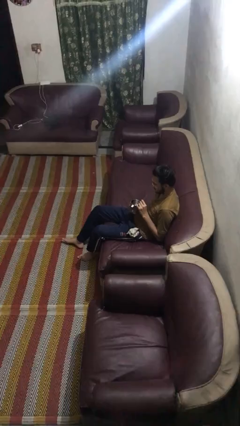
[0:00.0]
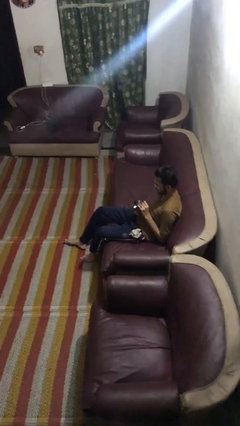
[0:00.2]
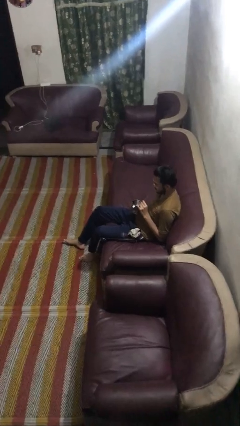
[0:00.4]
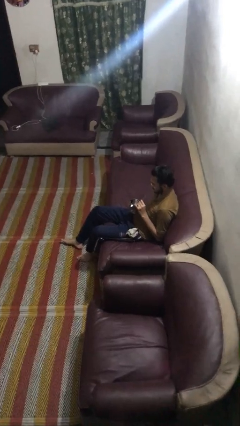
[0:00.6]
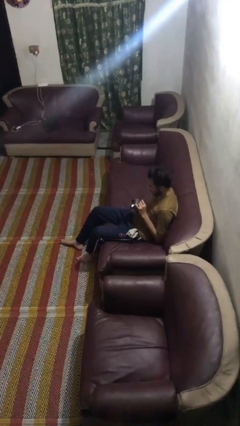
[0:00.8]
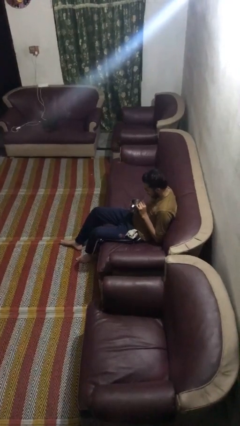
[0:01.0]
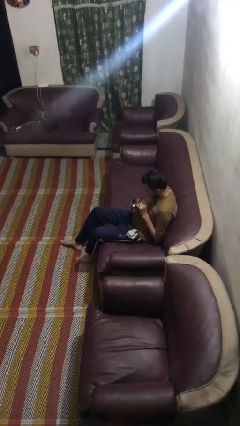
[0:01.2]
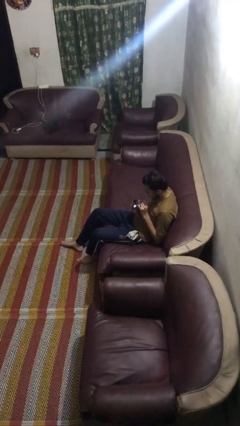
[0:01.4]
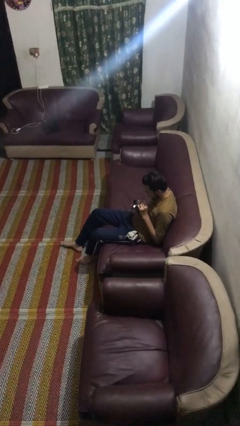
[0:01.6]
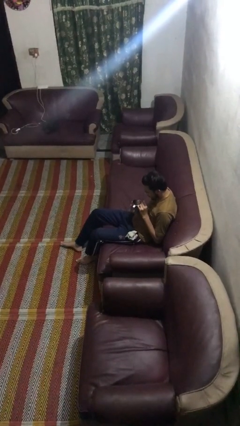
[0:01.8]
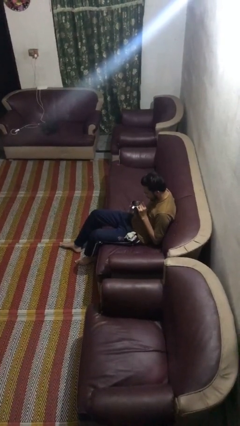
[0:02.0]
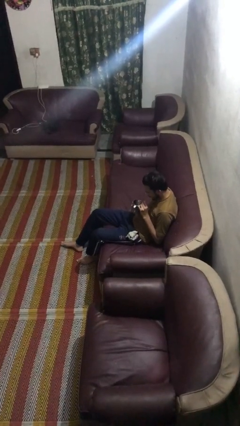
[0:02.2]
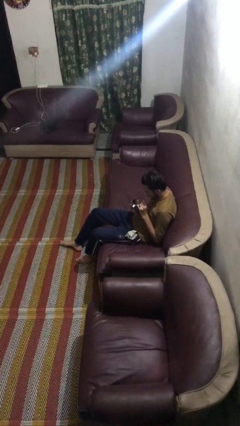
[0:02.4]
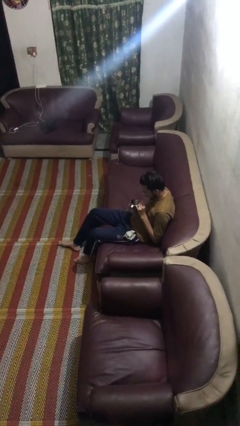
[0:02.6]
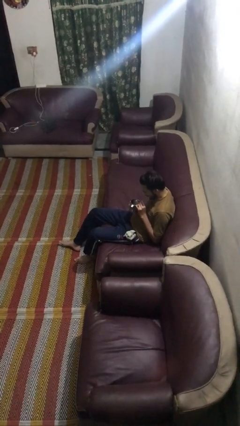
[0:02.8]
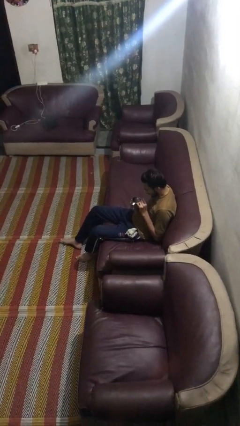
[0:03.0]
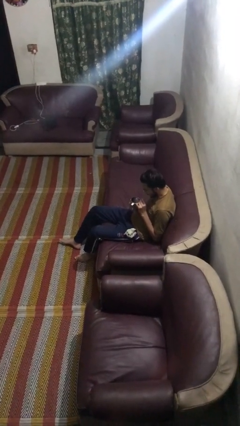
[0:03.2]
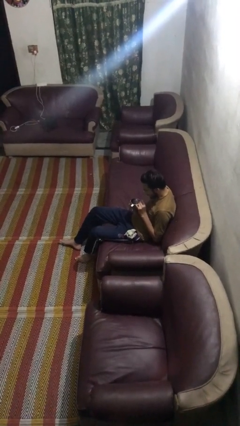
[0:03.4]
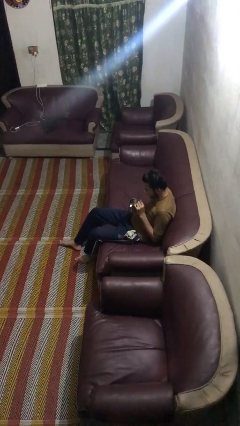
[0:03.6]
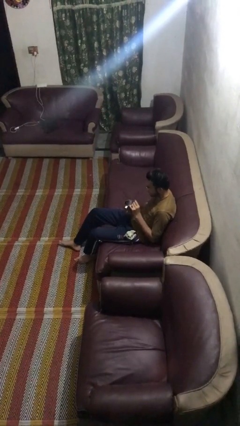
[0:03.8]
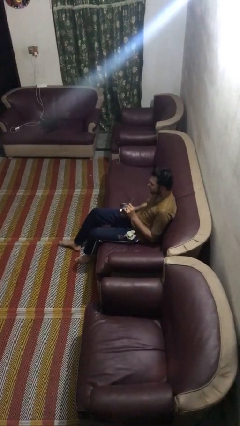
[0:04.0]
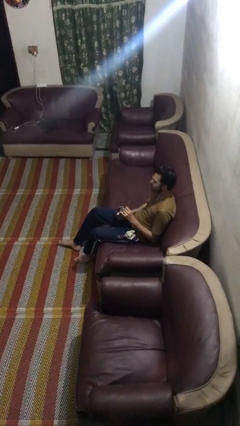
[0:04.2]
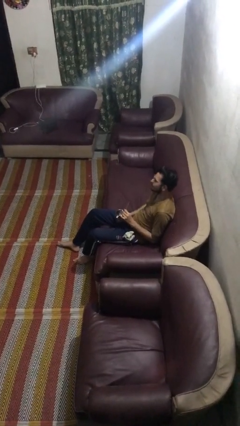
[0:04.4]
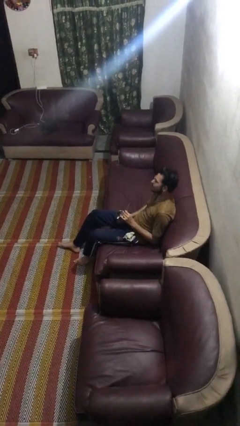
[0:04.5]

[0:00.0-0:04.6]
person drinks from straw

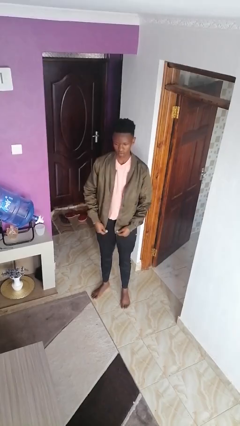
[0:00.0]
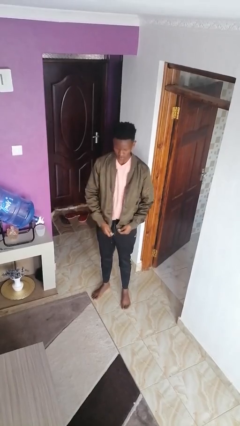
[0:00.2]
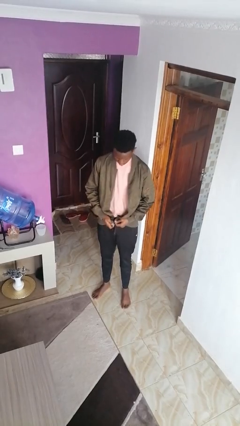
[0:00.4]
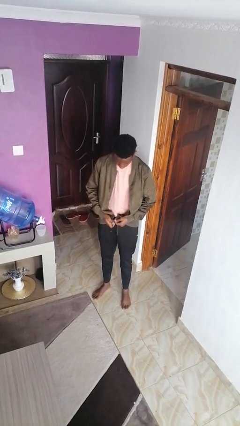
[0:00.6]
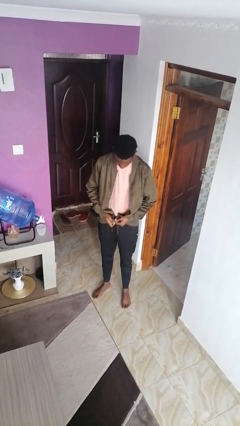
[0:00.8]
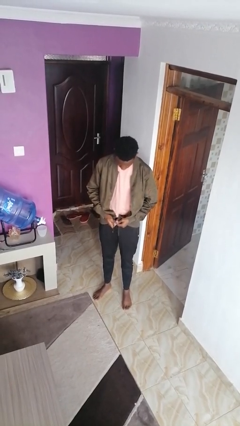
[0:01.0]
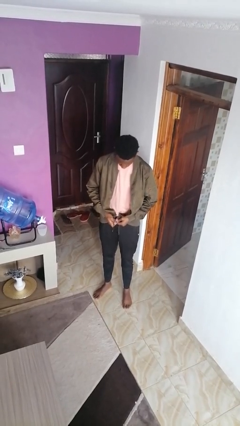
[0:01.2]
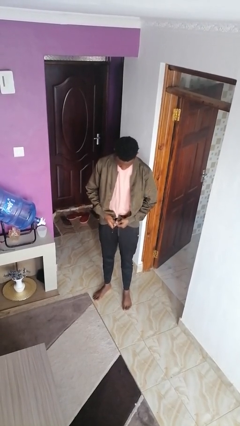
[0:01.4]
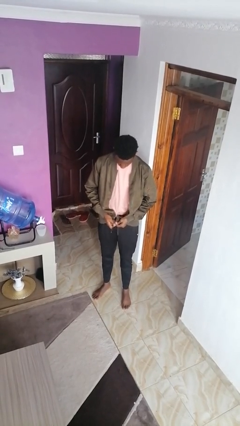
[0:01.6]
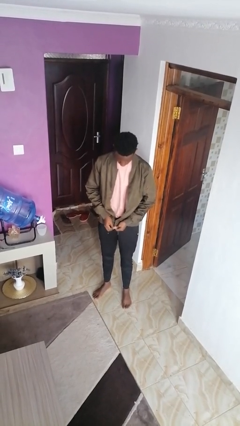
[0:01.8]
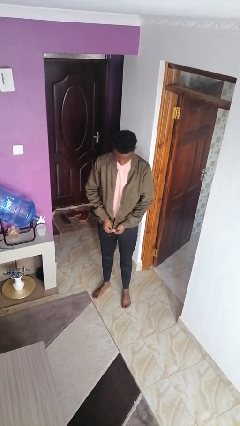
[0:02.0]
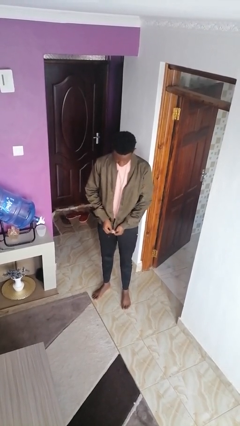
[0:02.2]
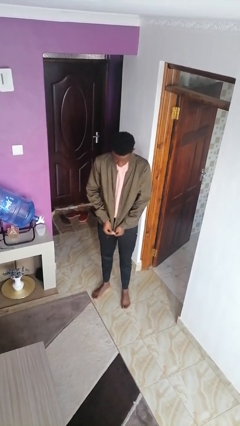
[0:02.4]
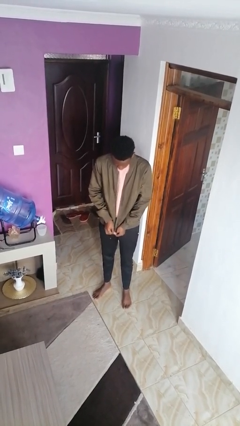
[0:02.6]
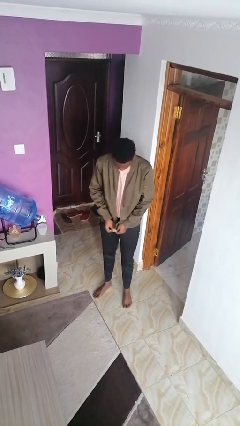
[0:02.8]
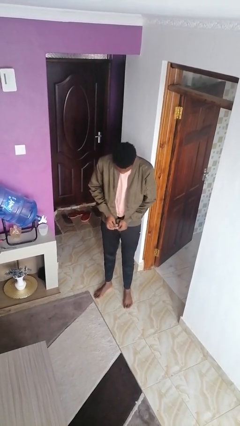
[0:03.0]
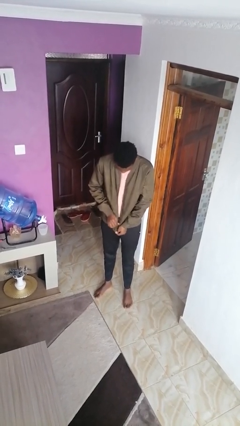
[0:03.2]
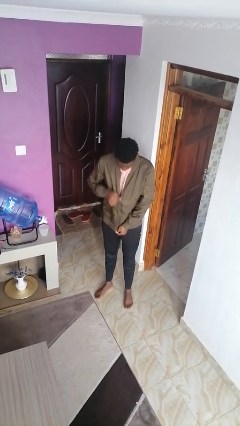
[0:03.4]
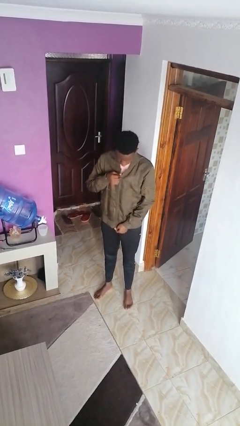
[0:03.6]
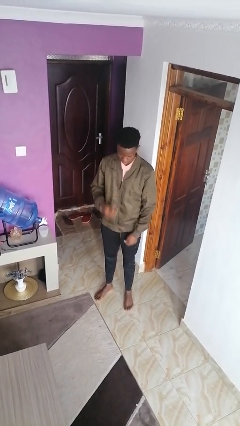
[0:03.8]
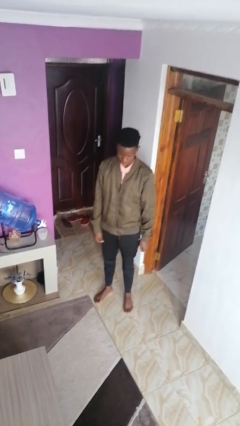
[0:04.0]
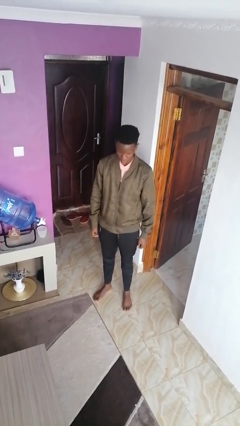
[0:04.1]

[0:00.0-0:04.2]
person zips up jacket

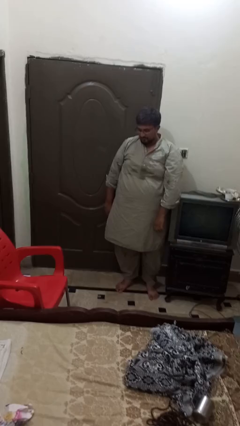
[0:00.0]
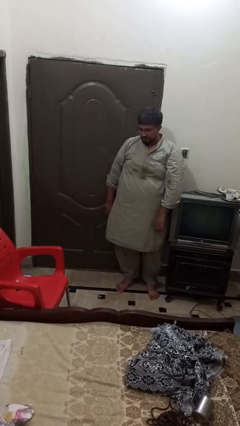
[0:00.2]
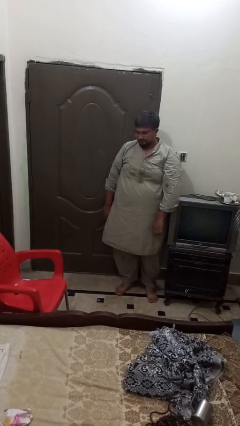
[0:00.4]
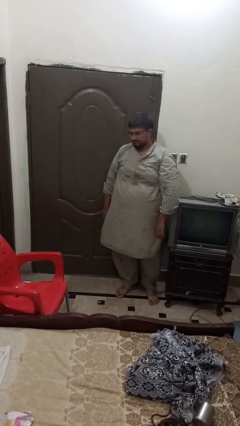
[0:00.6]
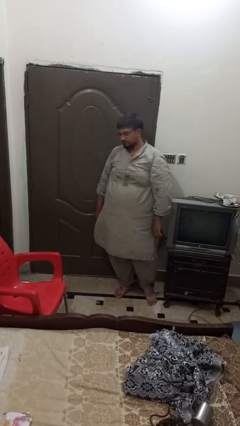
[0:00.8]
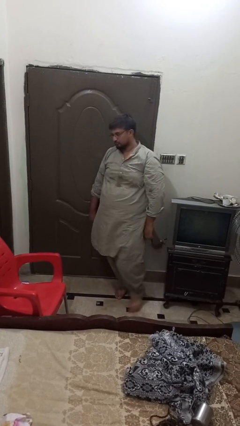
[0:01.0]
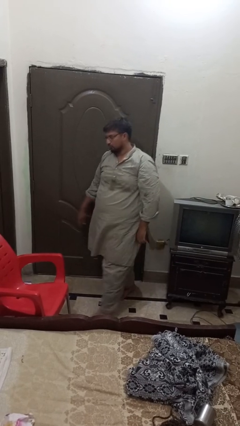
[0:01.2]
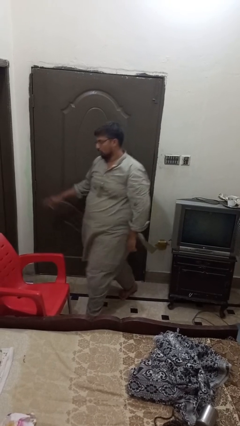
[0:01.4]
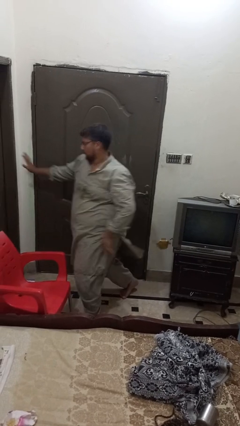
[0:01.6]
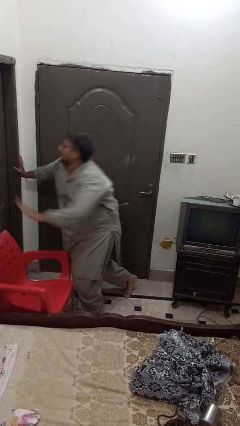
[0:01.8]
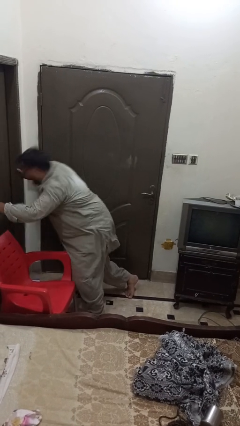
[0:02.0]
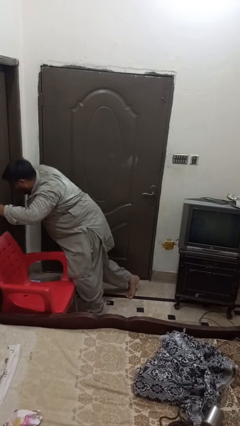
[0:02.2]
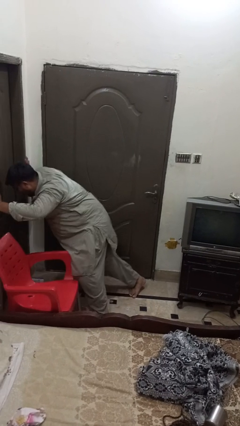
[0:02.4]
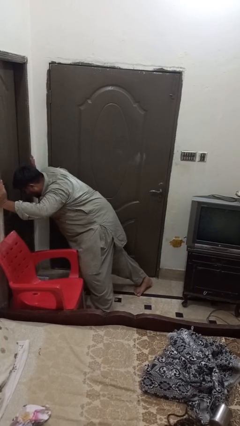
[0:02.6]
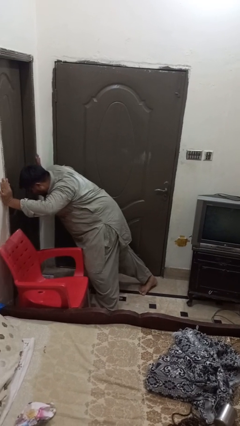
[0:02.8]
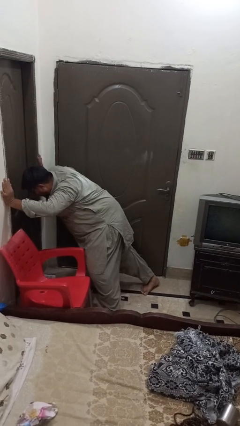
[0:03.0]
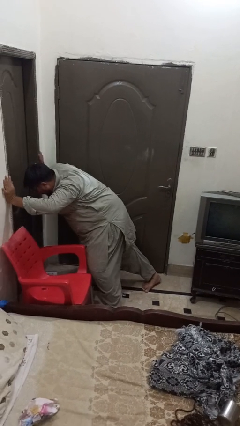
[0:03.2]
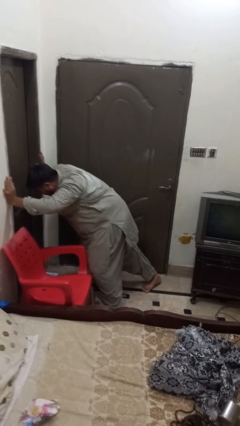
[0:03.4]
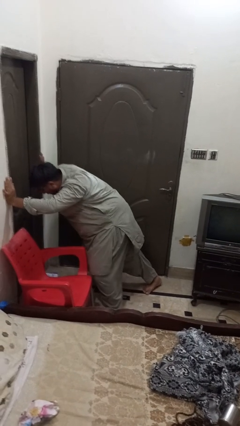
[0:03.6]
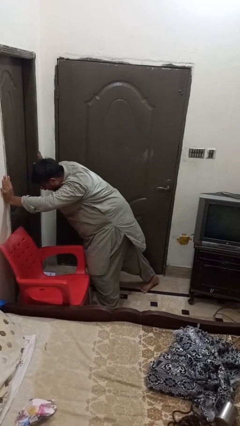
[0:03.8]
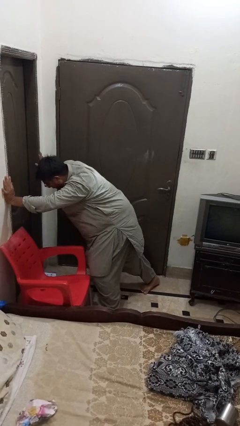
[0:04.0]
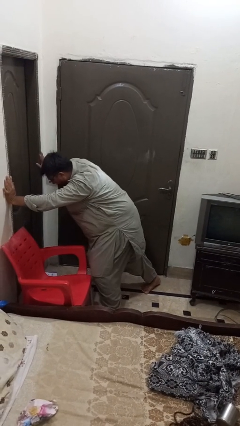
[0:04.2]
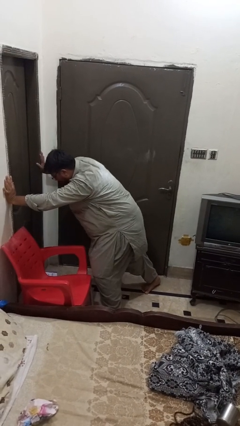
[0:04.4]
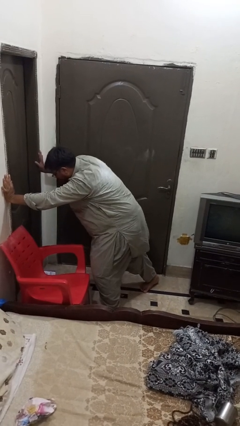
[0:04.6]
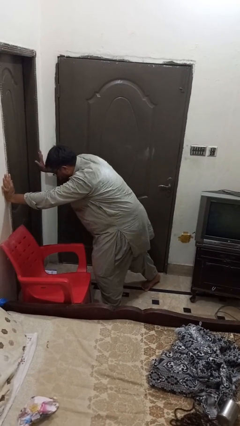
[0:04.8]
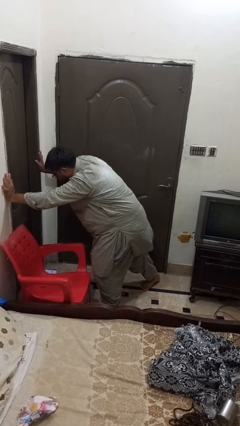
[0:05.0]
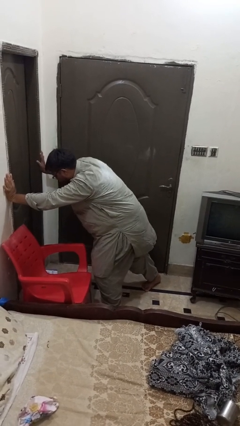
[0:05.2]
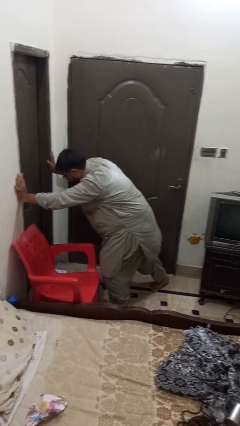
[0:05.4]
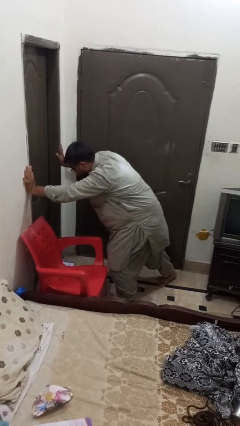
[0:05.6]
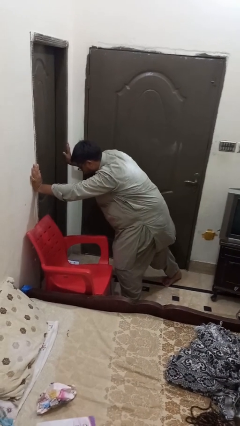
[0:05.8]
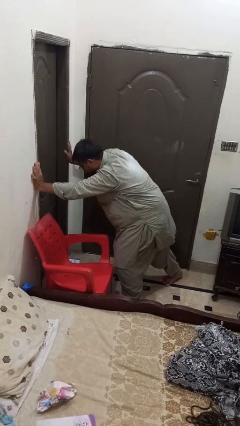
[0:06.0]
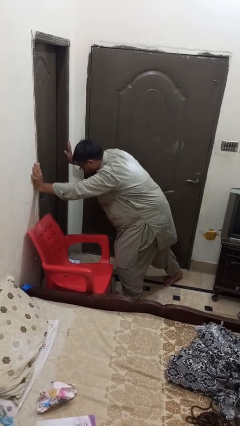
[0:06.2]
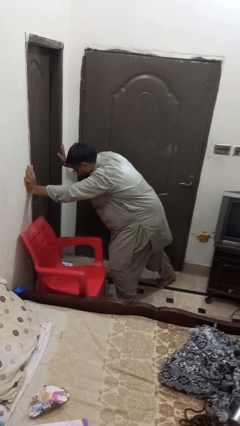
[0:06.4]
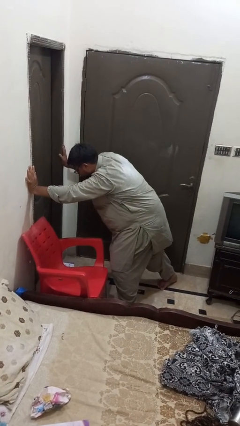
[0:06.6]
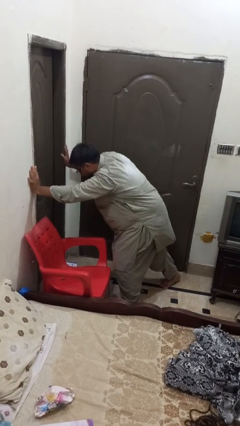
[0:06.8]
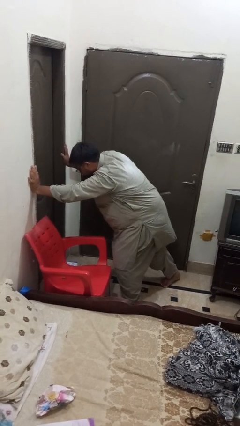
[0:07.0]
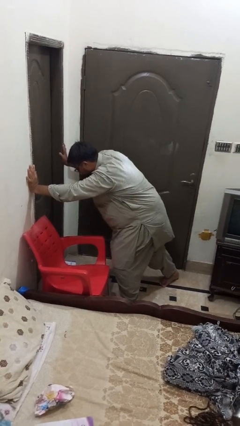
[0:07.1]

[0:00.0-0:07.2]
person trips on object on floor

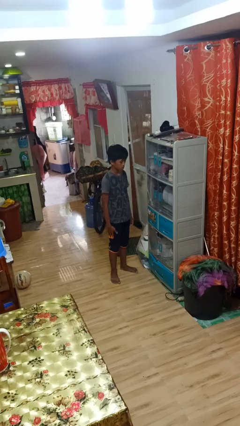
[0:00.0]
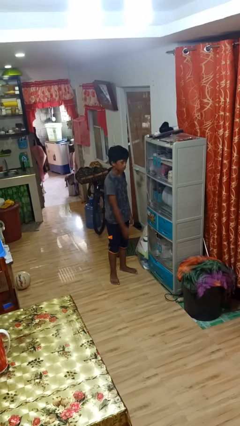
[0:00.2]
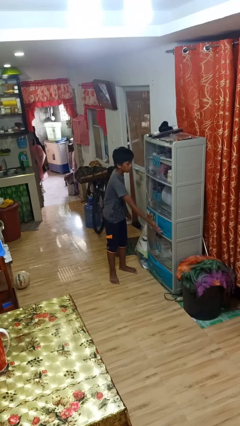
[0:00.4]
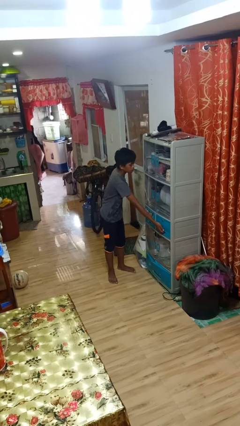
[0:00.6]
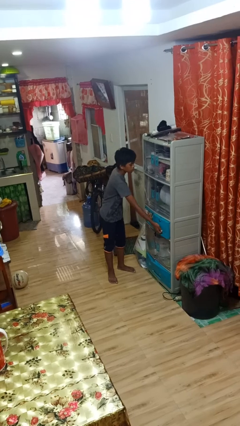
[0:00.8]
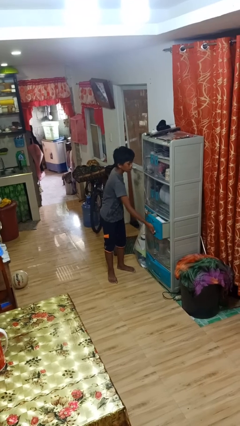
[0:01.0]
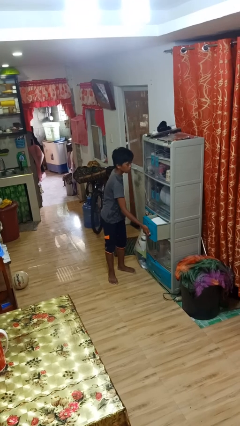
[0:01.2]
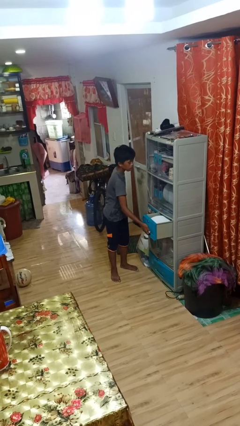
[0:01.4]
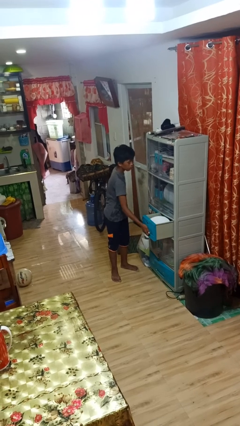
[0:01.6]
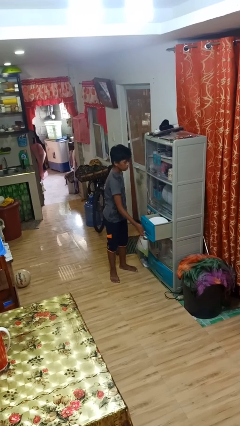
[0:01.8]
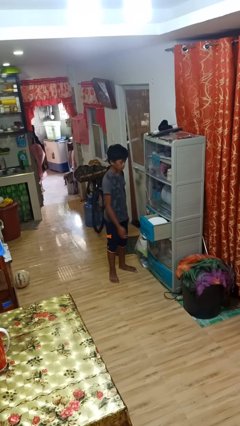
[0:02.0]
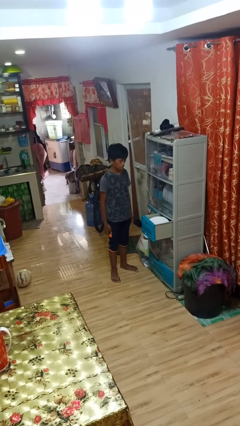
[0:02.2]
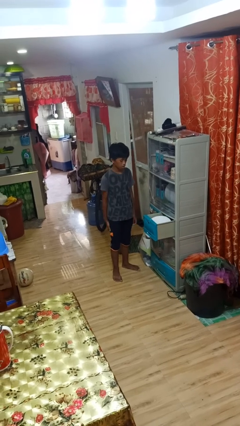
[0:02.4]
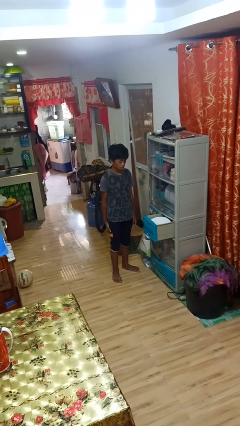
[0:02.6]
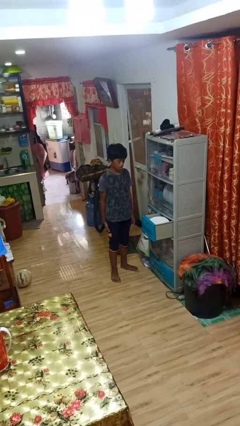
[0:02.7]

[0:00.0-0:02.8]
person opens kitchen drawer
